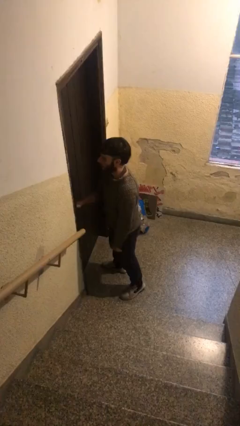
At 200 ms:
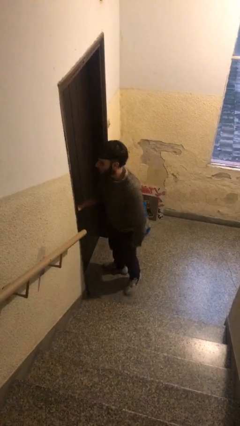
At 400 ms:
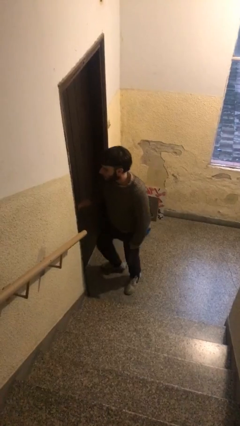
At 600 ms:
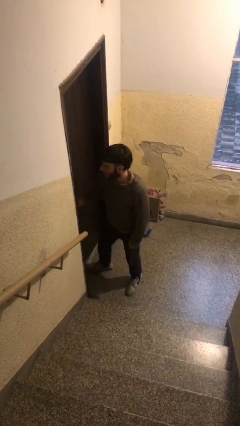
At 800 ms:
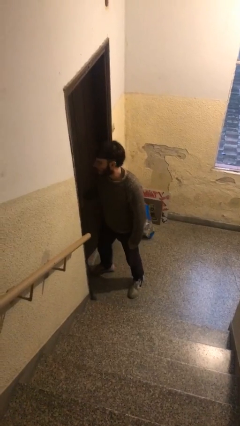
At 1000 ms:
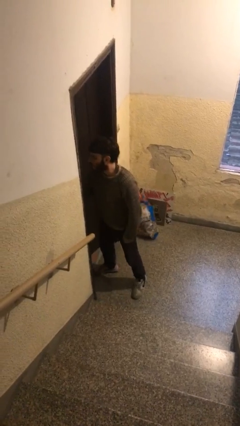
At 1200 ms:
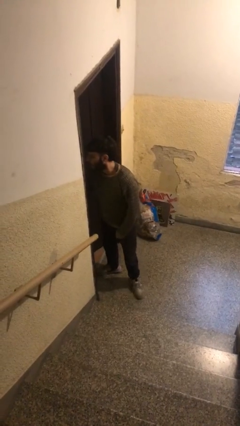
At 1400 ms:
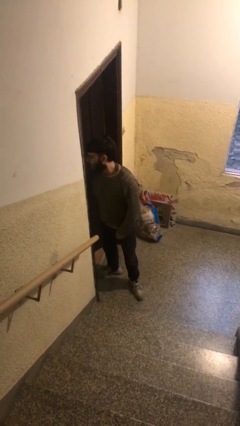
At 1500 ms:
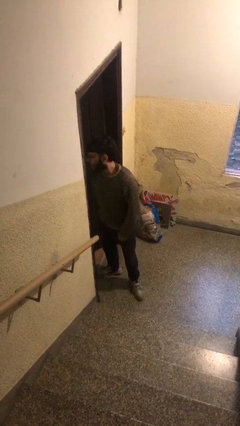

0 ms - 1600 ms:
person opens facility door

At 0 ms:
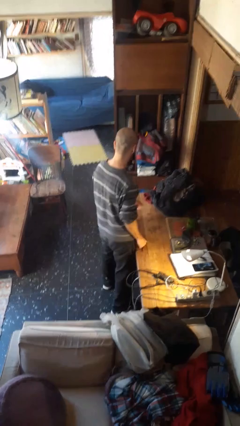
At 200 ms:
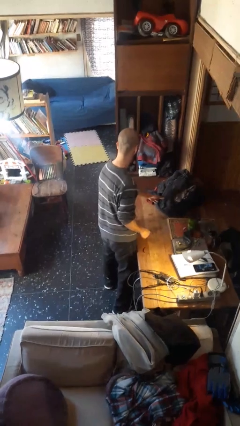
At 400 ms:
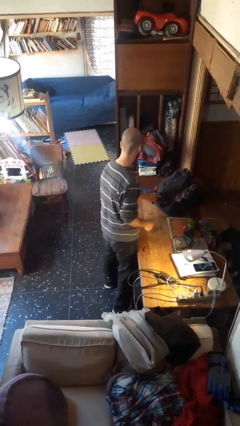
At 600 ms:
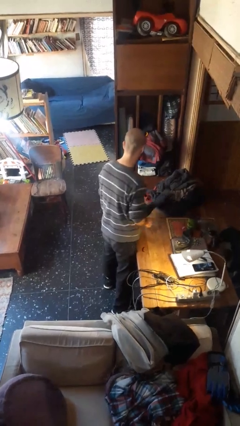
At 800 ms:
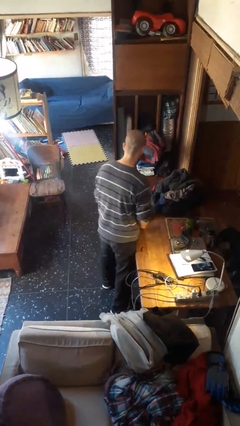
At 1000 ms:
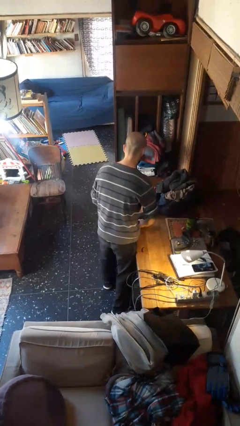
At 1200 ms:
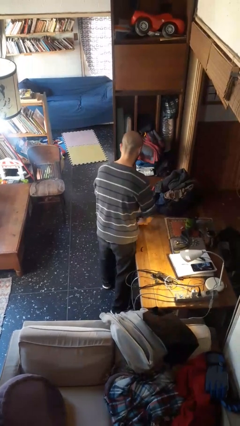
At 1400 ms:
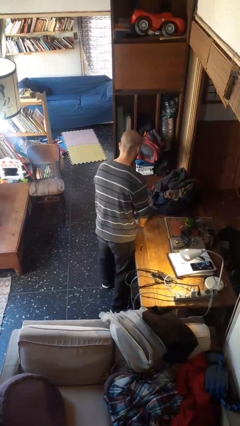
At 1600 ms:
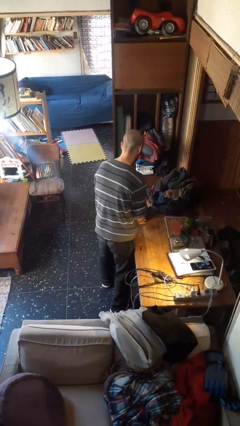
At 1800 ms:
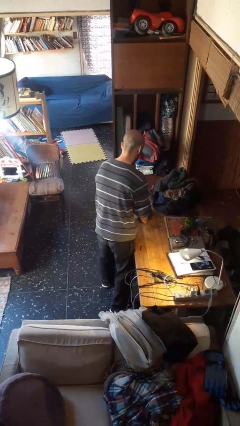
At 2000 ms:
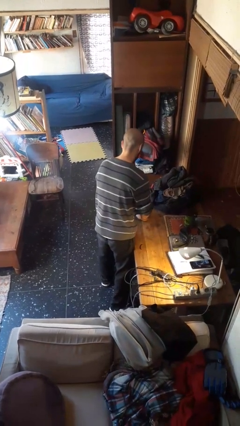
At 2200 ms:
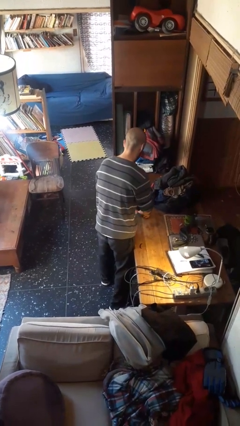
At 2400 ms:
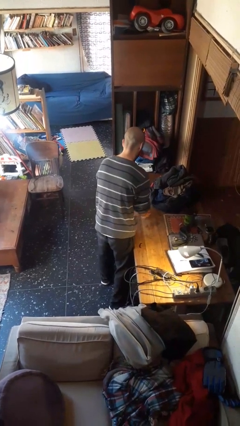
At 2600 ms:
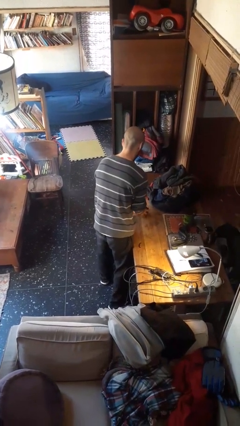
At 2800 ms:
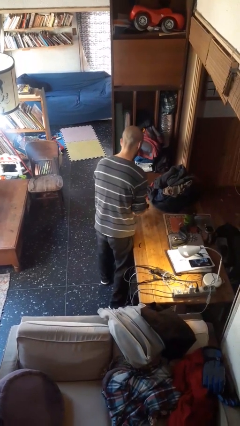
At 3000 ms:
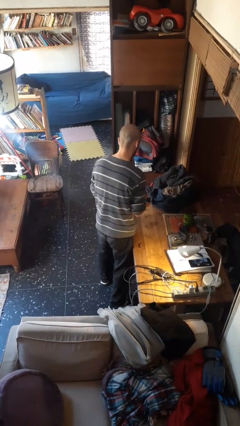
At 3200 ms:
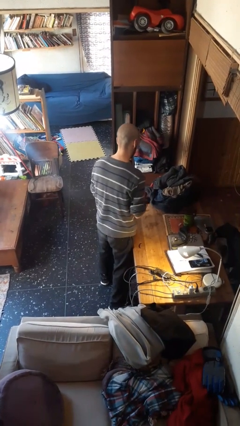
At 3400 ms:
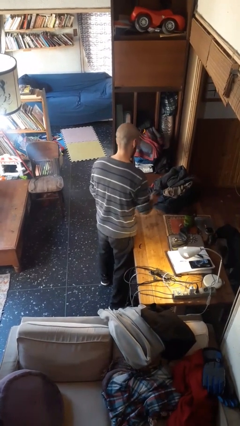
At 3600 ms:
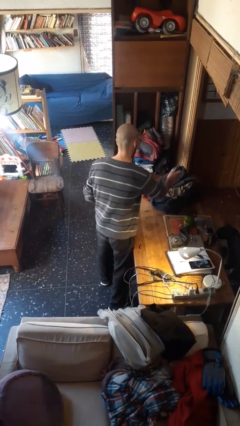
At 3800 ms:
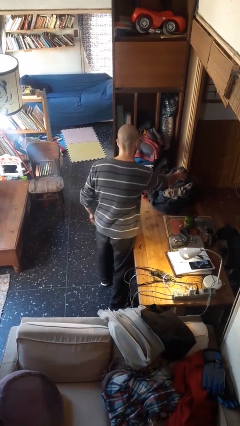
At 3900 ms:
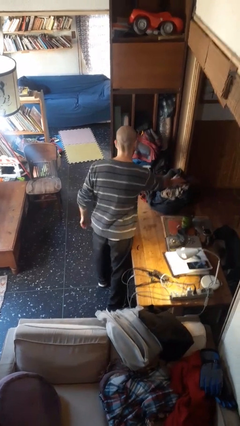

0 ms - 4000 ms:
person folds socks

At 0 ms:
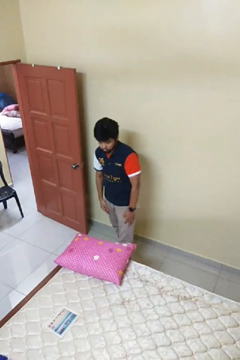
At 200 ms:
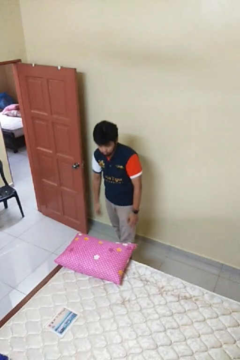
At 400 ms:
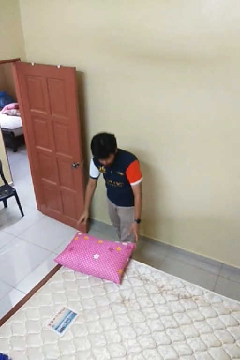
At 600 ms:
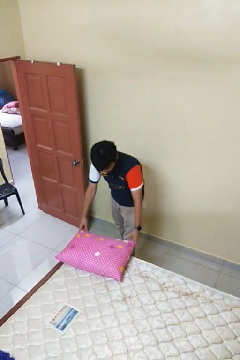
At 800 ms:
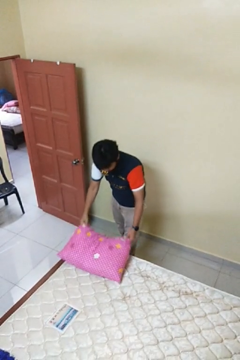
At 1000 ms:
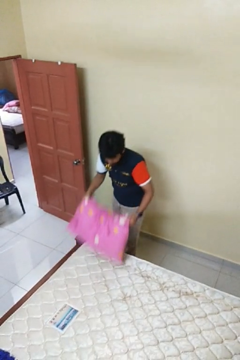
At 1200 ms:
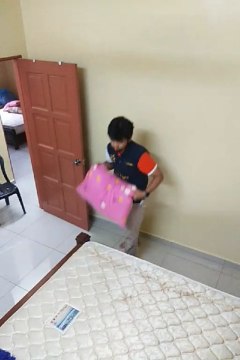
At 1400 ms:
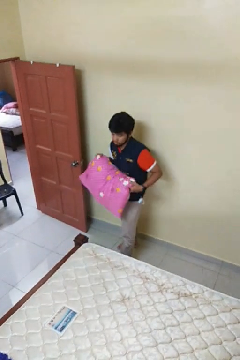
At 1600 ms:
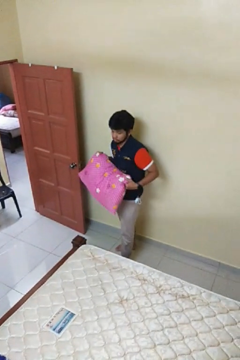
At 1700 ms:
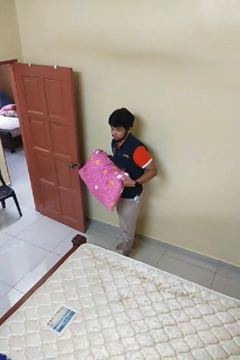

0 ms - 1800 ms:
person picks up object from bed

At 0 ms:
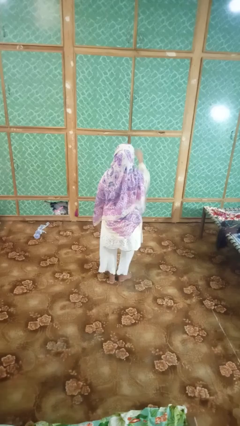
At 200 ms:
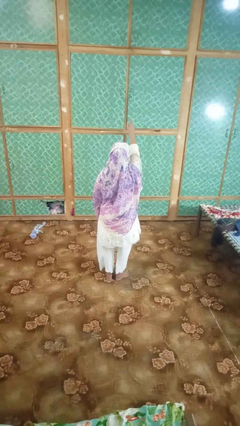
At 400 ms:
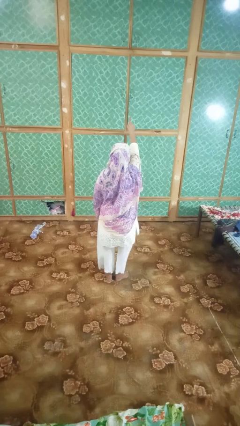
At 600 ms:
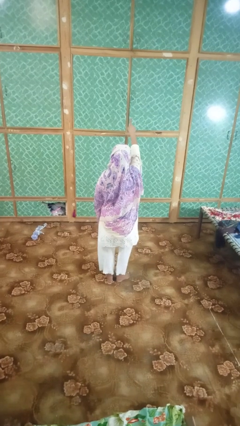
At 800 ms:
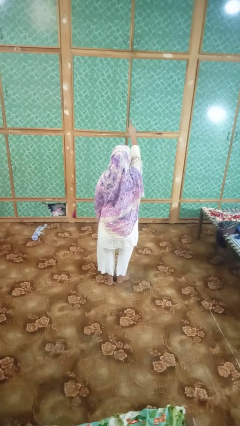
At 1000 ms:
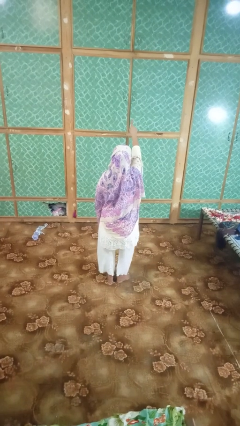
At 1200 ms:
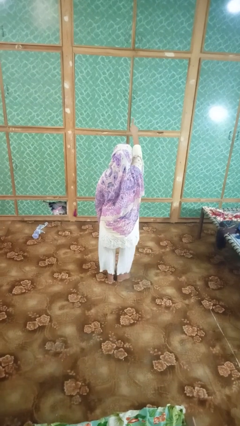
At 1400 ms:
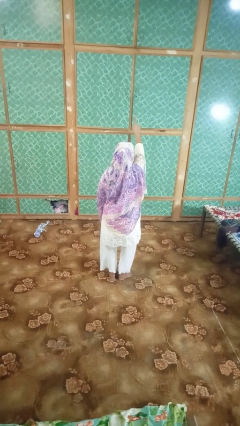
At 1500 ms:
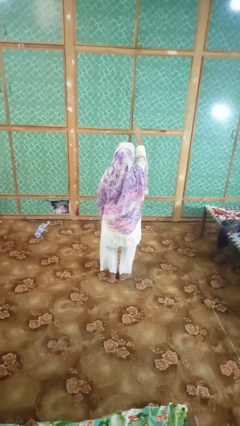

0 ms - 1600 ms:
person gestures number one

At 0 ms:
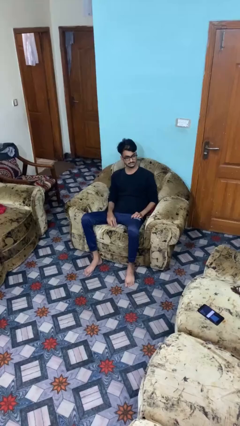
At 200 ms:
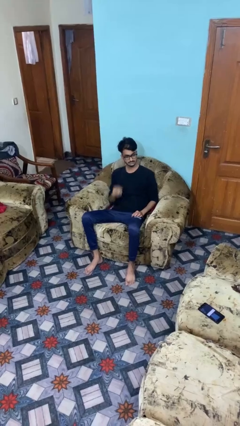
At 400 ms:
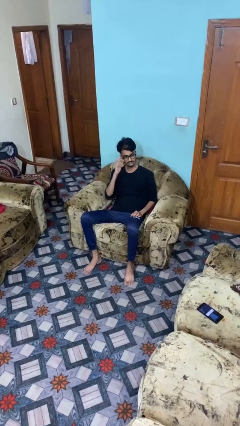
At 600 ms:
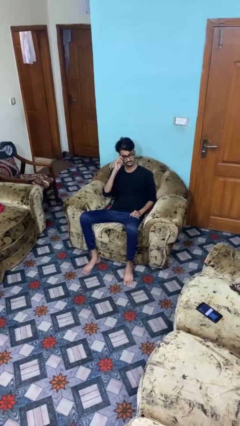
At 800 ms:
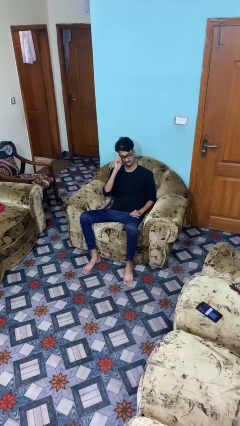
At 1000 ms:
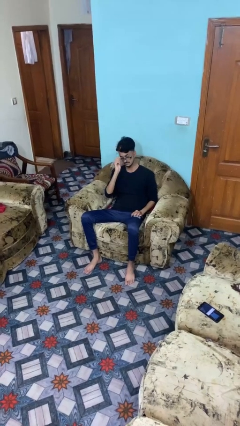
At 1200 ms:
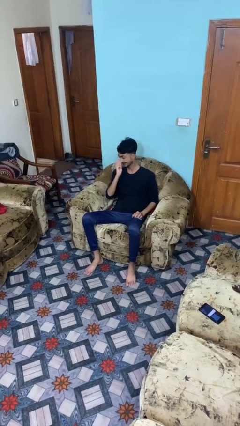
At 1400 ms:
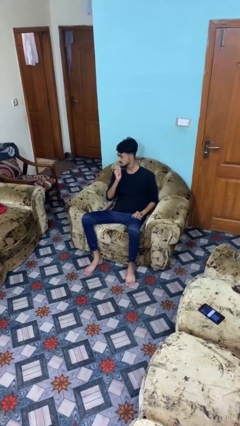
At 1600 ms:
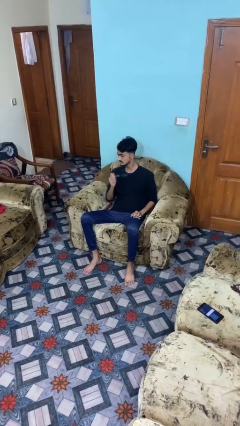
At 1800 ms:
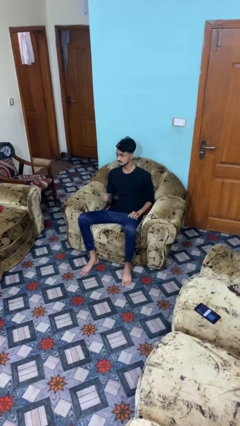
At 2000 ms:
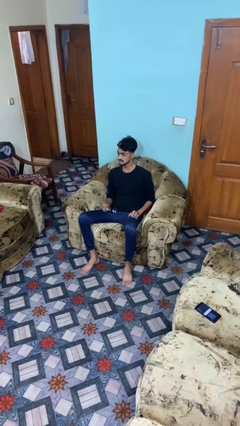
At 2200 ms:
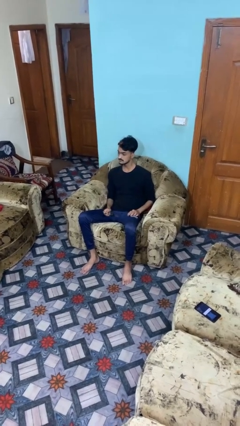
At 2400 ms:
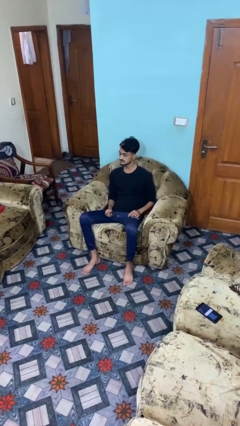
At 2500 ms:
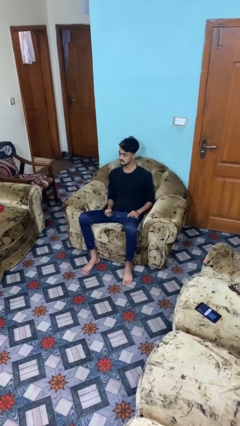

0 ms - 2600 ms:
person takes off glasses

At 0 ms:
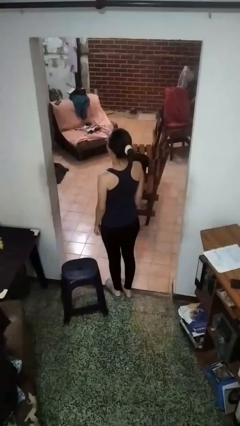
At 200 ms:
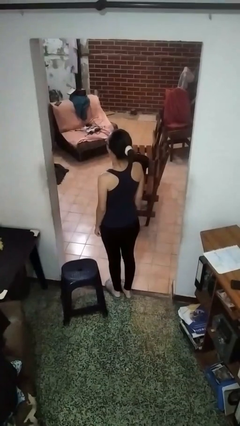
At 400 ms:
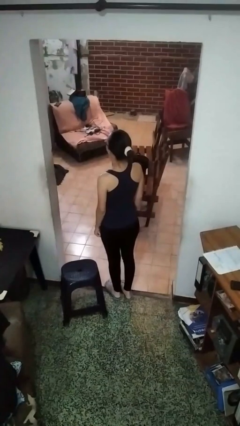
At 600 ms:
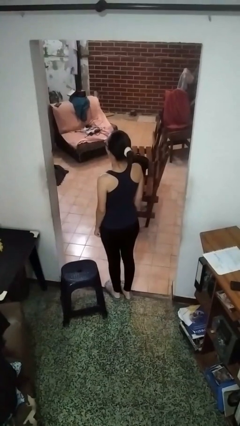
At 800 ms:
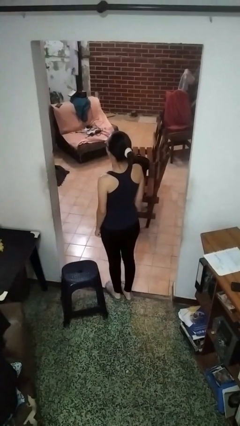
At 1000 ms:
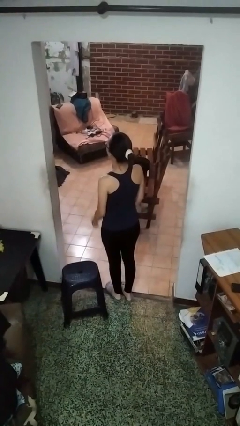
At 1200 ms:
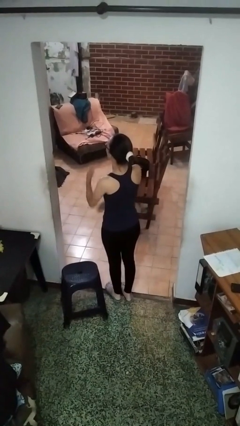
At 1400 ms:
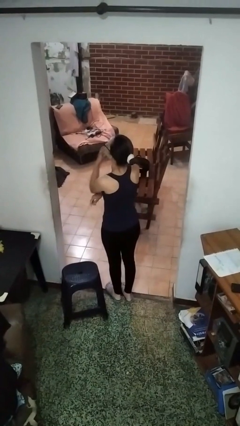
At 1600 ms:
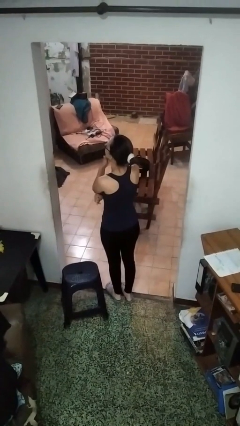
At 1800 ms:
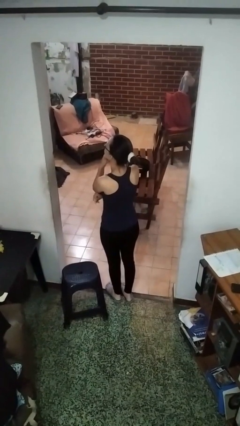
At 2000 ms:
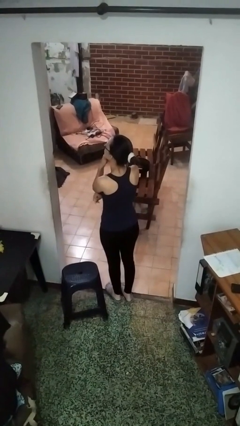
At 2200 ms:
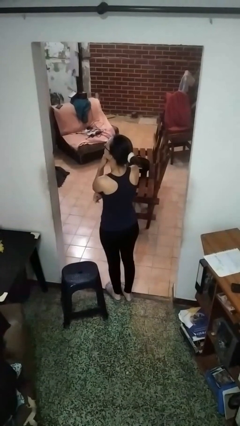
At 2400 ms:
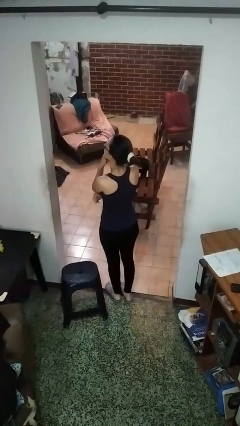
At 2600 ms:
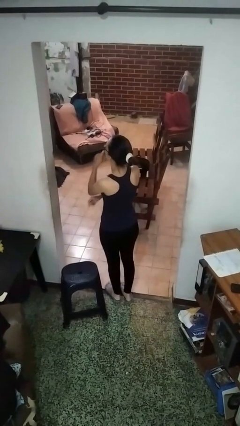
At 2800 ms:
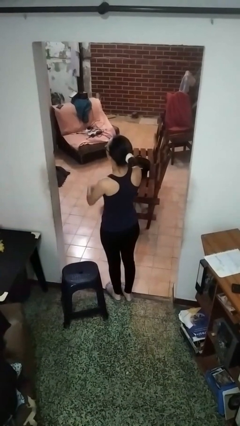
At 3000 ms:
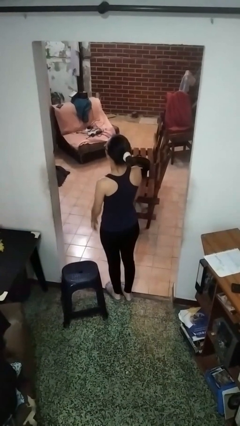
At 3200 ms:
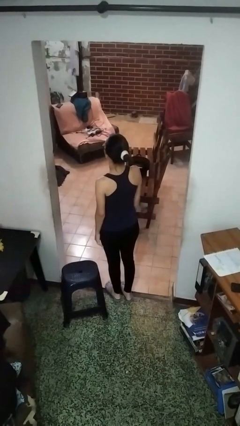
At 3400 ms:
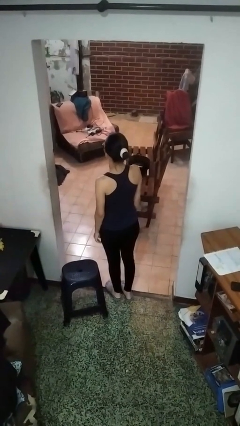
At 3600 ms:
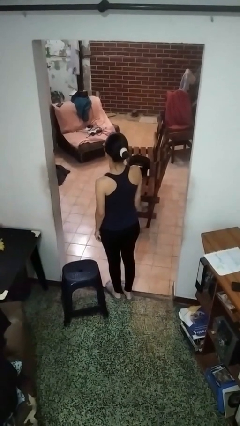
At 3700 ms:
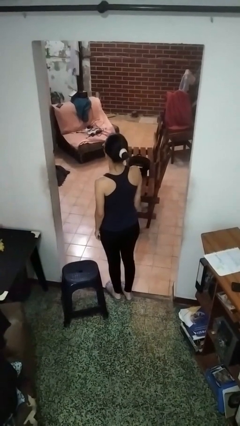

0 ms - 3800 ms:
person strokes chin

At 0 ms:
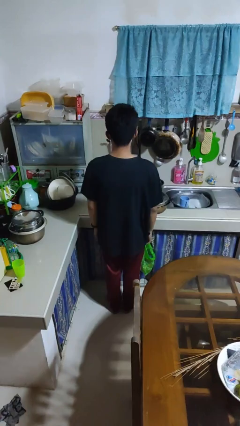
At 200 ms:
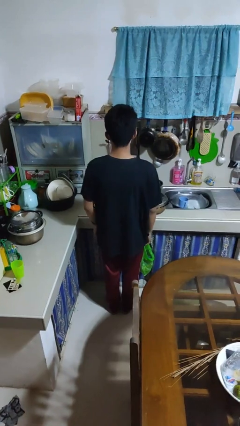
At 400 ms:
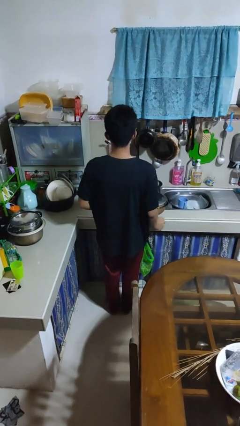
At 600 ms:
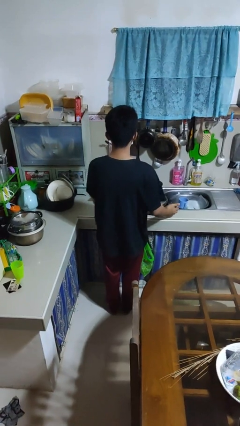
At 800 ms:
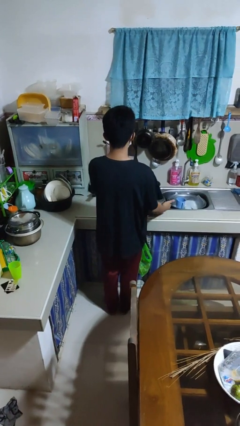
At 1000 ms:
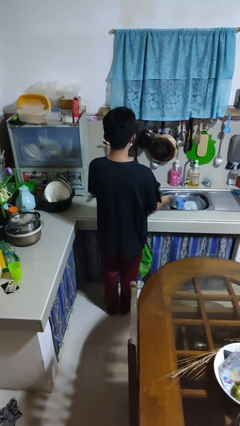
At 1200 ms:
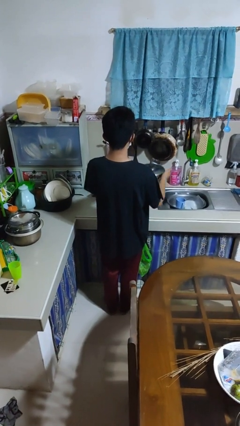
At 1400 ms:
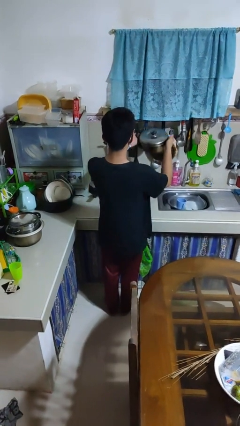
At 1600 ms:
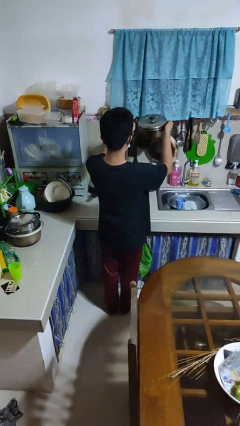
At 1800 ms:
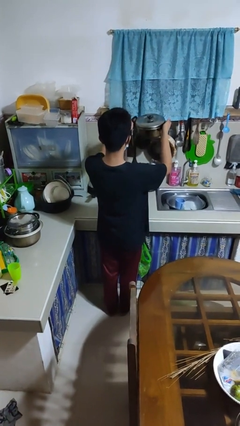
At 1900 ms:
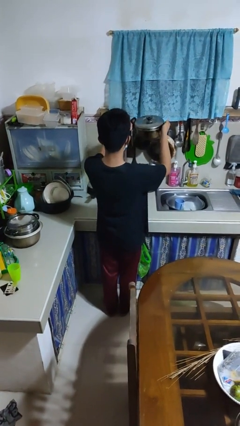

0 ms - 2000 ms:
person picks up object from countertop
